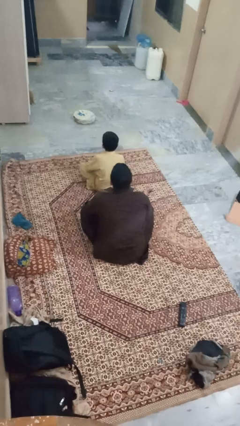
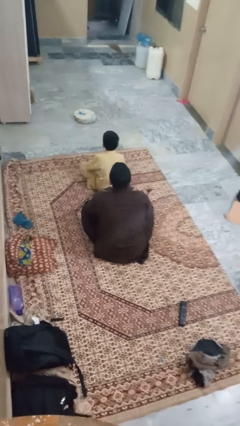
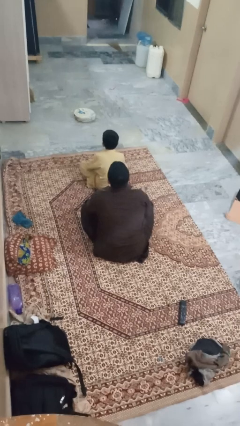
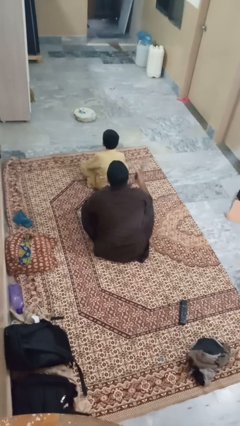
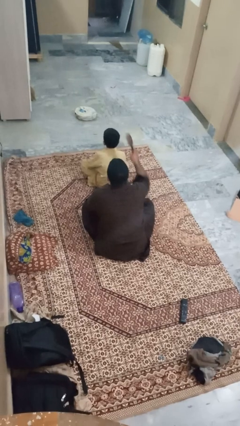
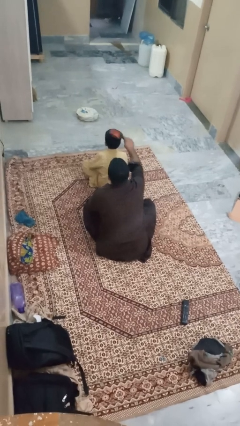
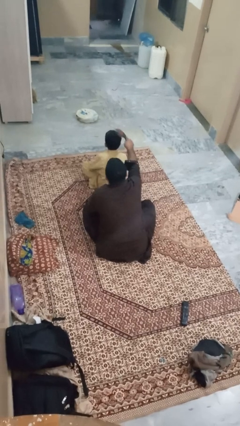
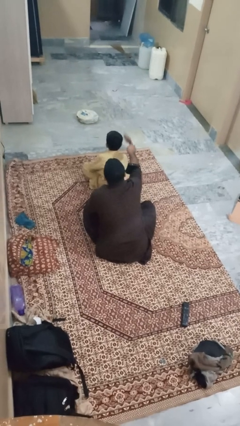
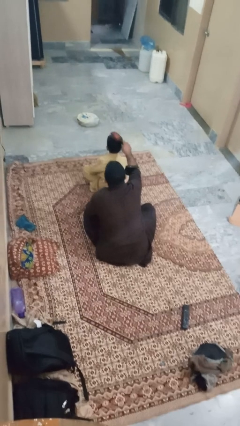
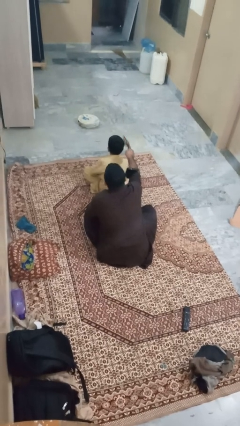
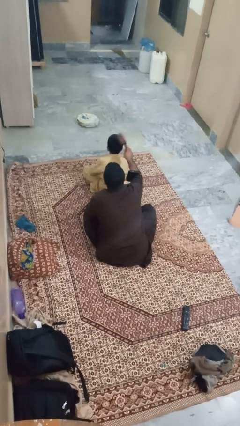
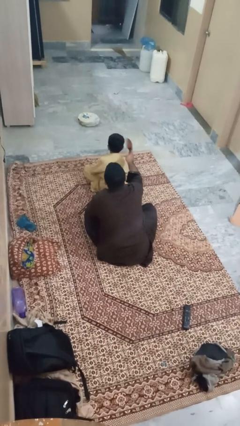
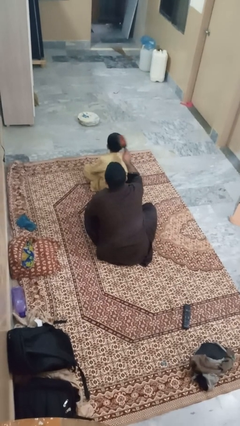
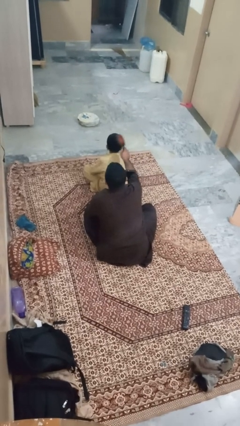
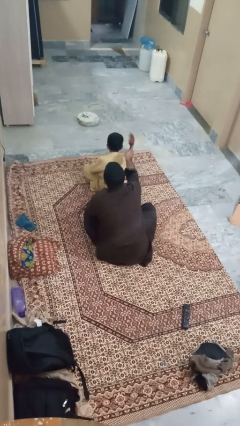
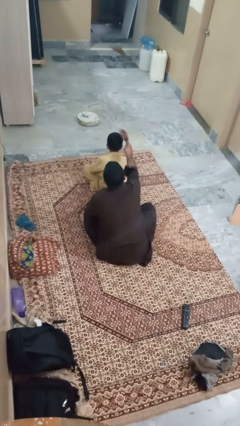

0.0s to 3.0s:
person brushes hair of person

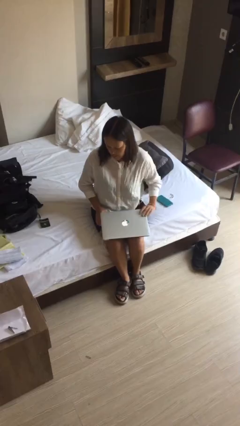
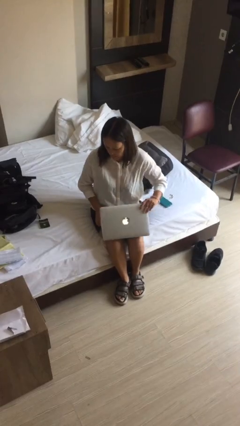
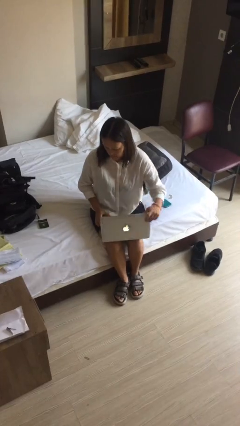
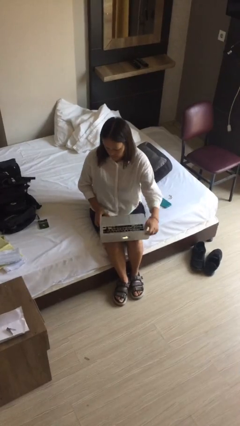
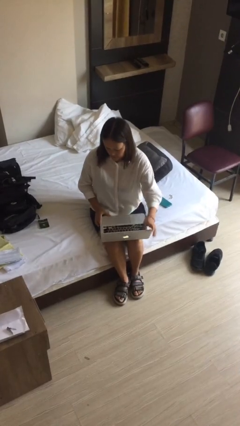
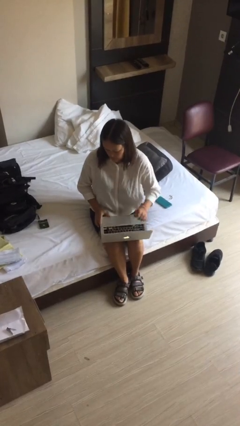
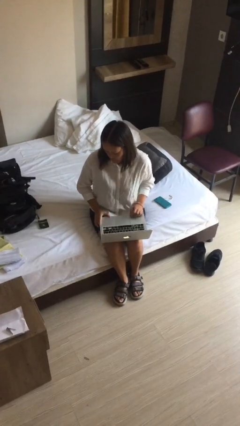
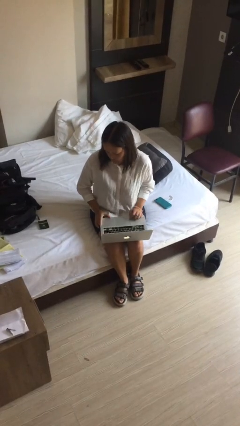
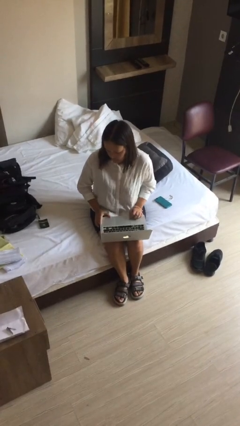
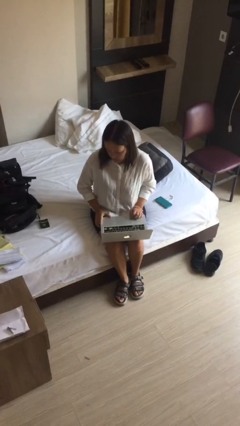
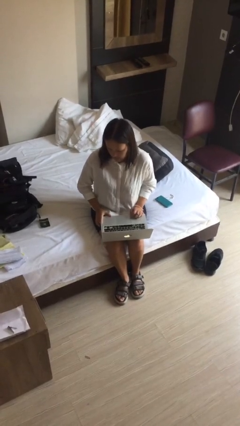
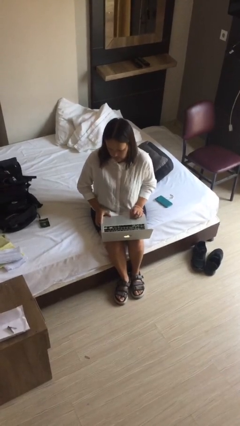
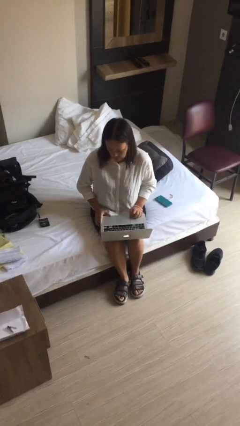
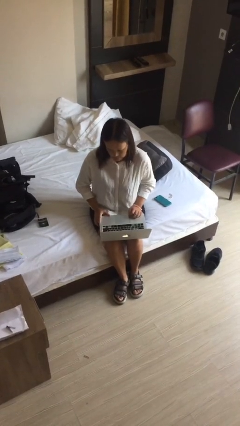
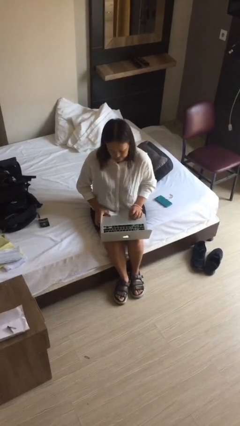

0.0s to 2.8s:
person opens laptop

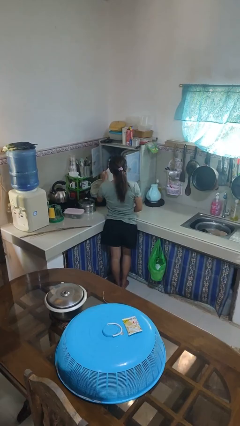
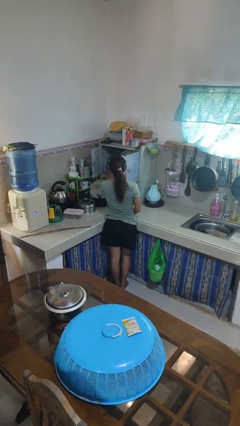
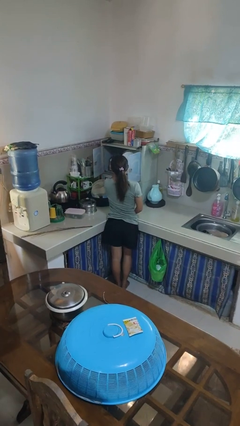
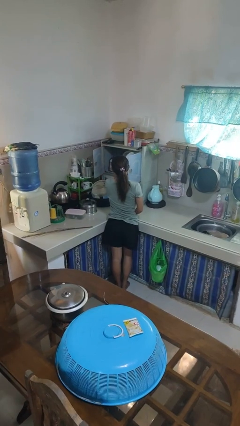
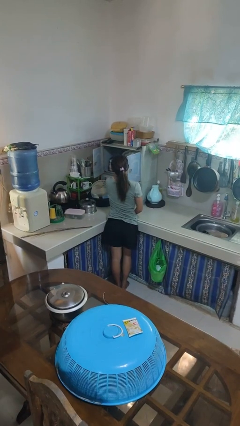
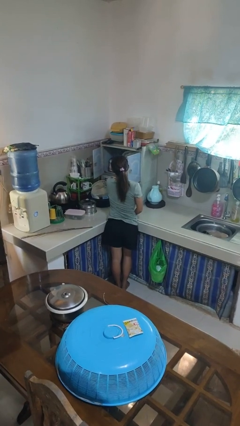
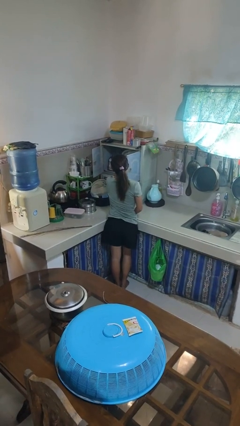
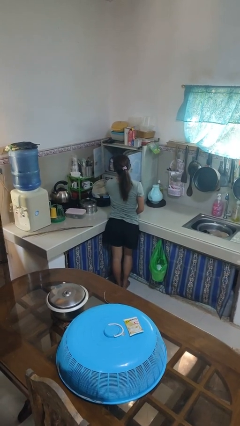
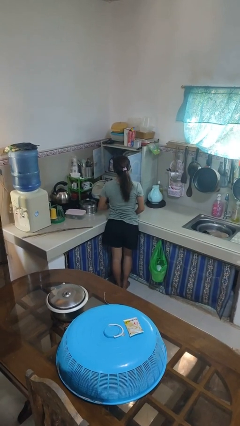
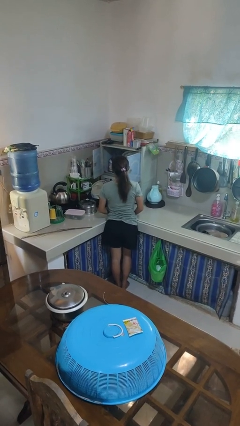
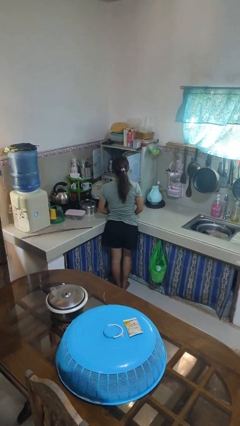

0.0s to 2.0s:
person puts object into kitchen drawer

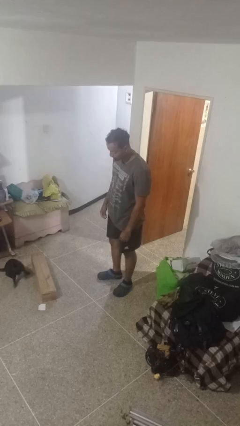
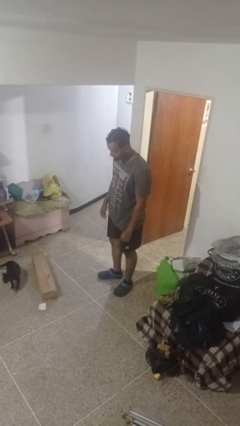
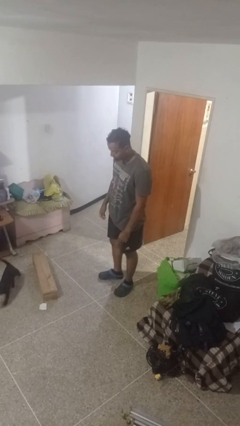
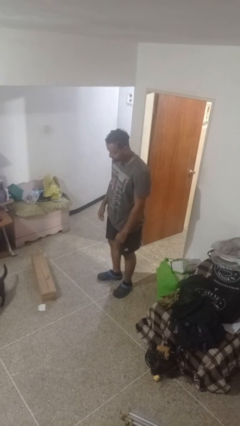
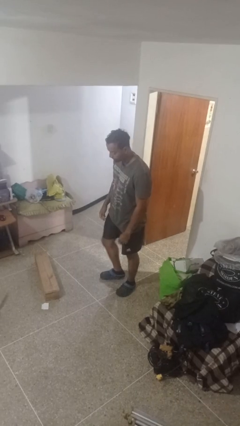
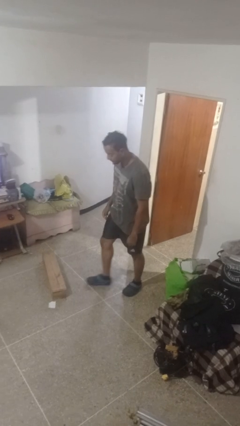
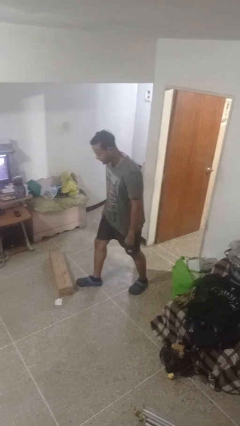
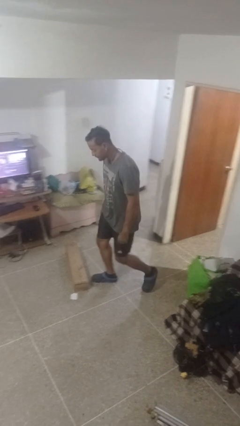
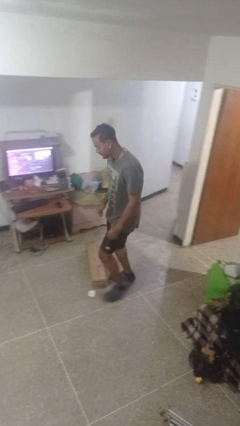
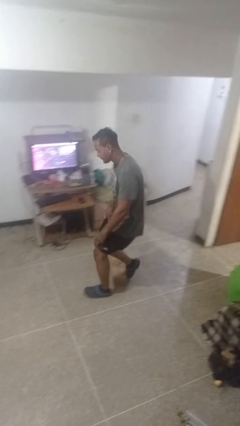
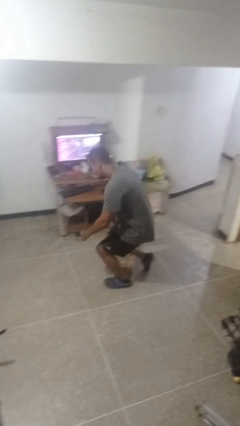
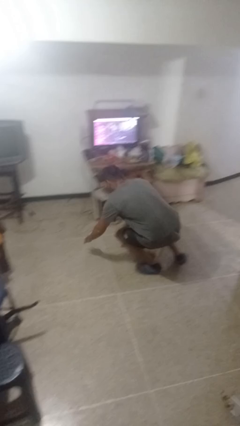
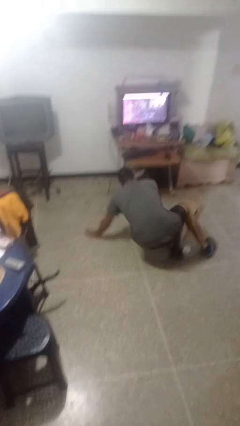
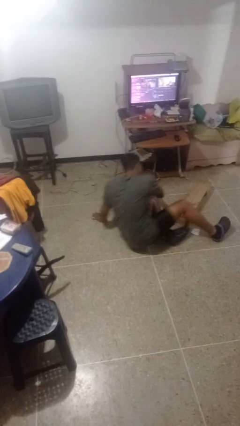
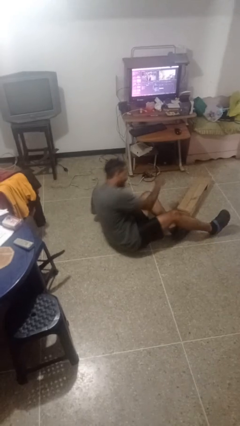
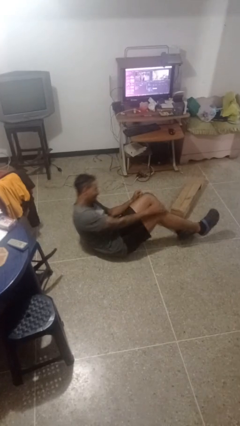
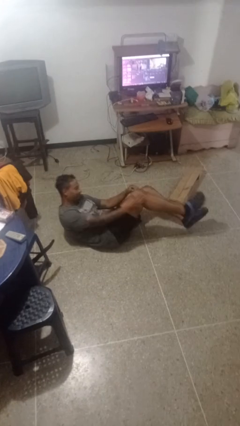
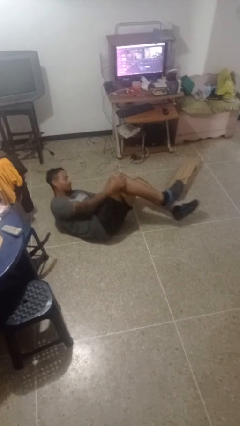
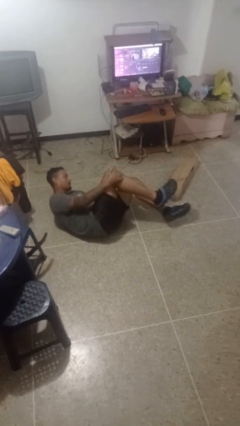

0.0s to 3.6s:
person trips on object on floor

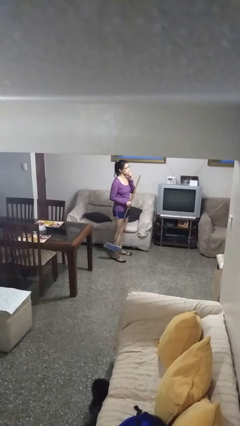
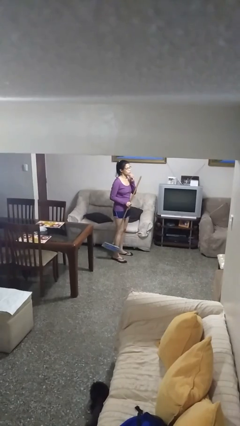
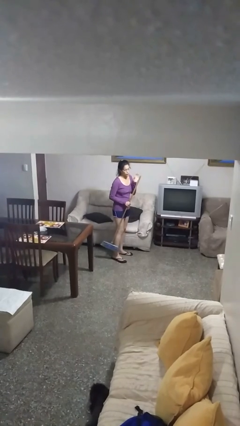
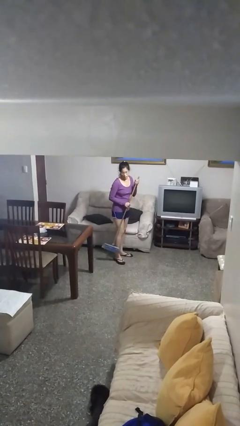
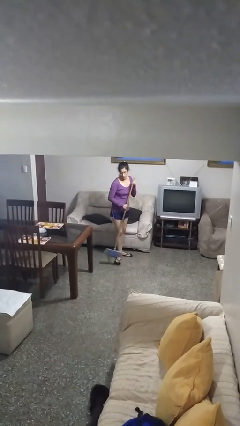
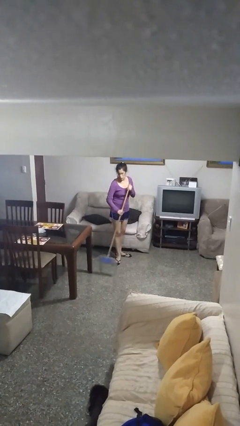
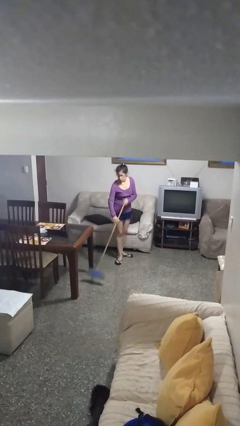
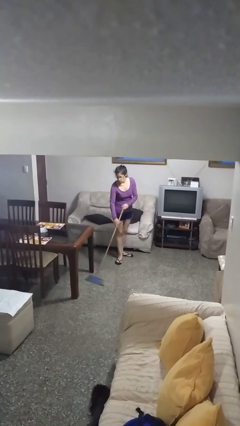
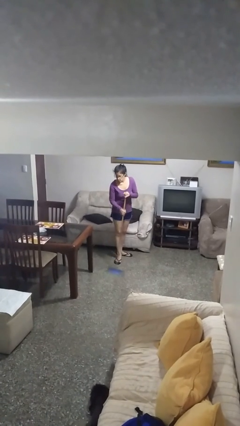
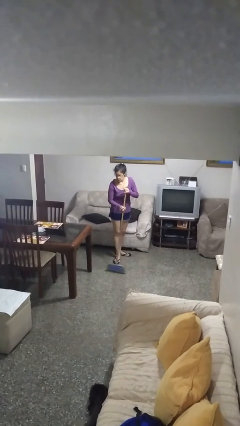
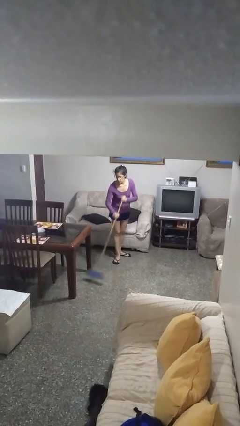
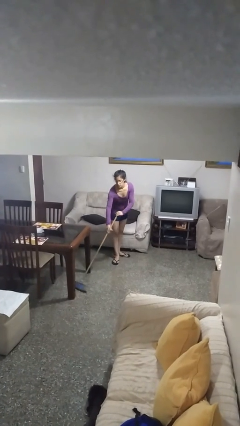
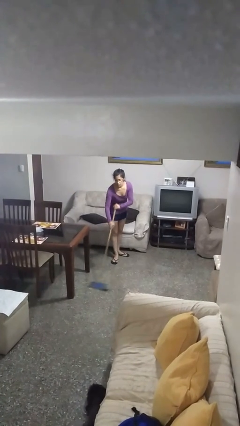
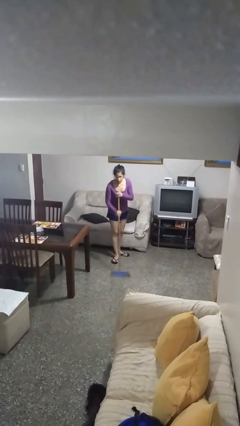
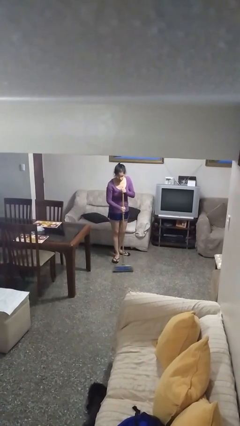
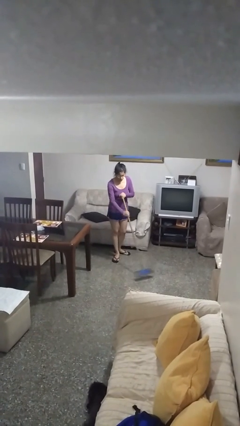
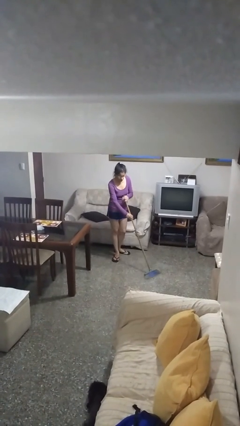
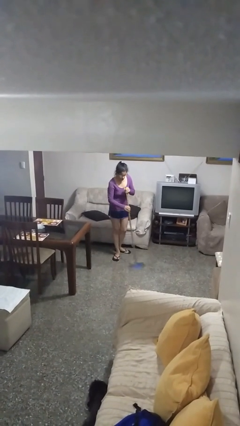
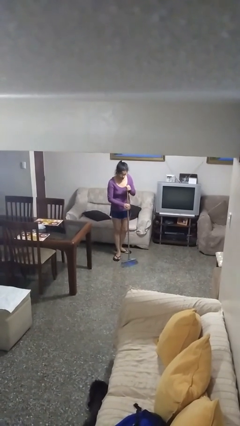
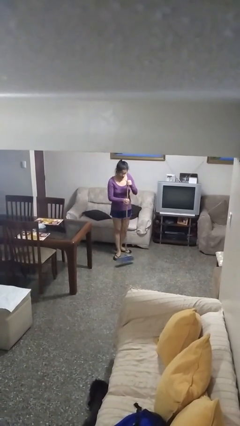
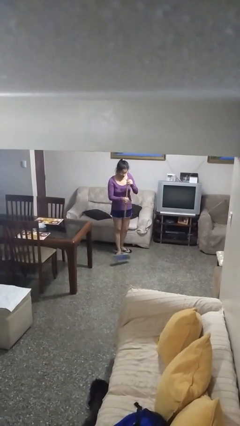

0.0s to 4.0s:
person sweeps floor

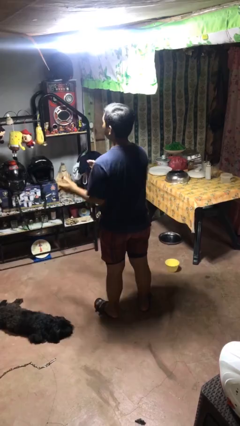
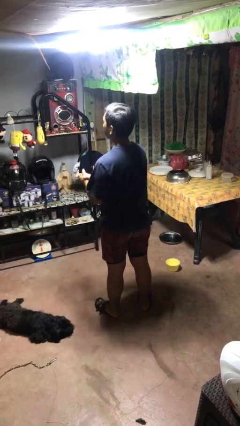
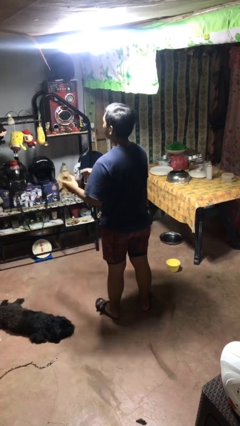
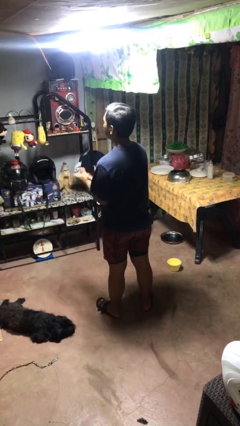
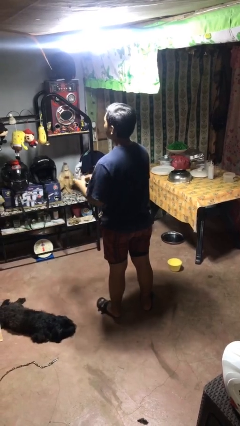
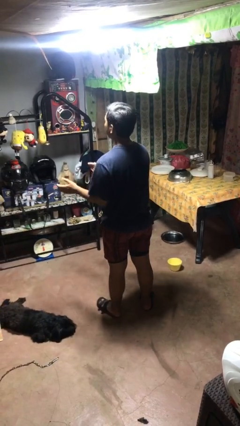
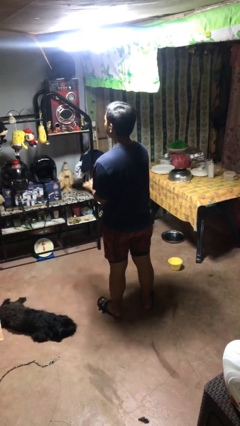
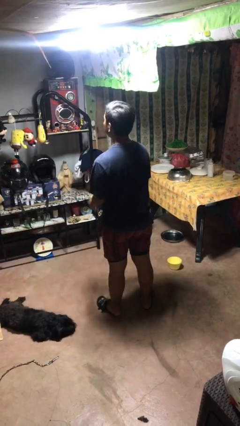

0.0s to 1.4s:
person claps hands

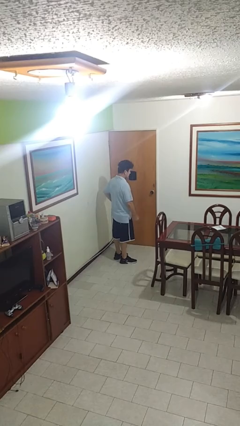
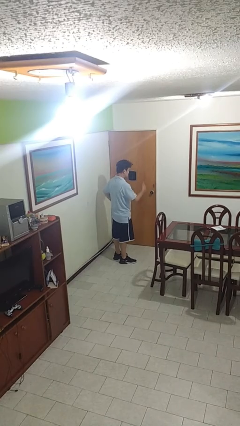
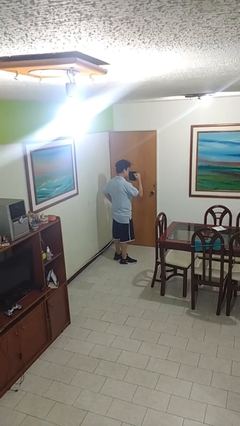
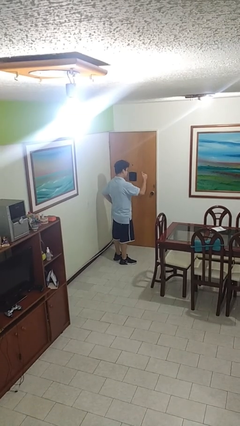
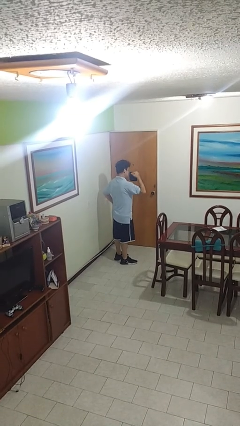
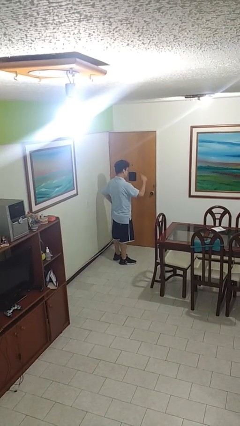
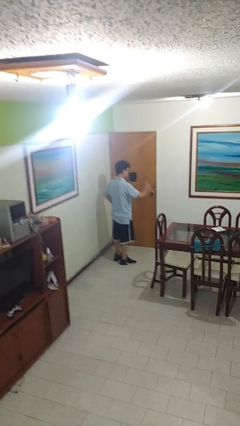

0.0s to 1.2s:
person gestures behind me
